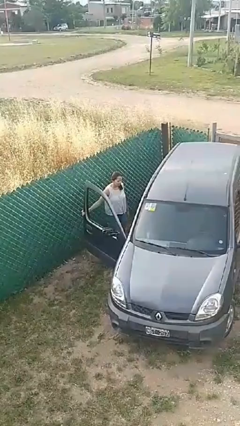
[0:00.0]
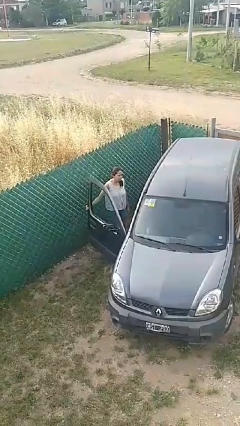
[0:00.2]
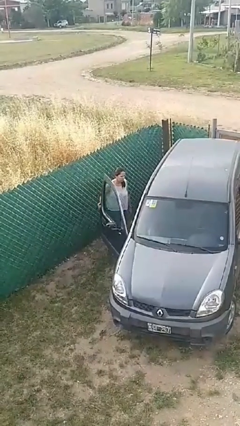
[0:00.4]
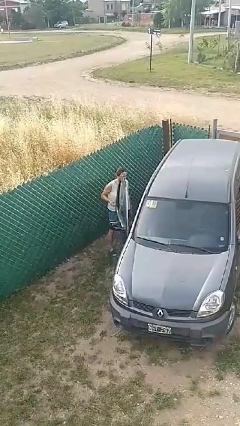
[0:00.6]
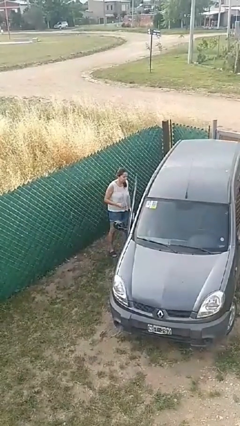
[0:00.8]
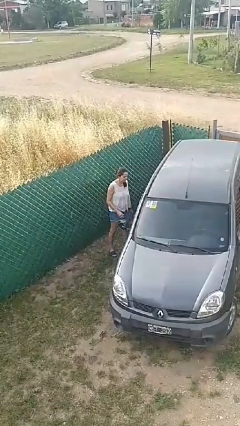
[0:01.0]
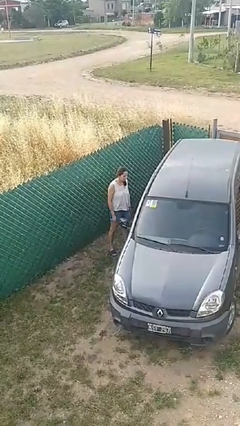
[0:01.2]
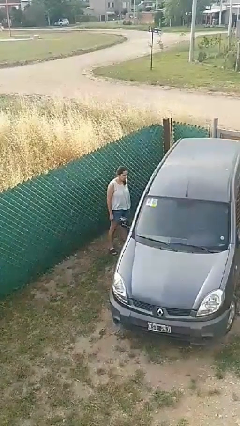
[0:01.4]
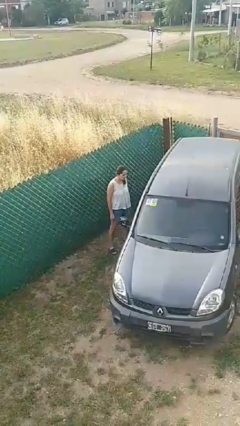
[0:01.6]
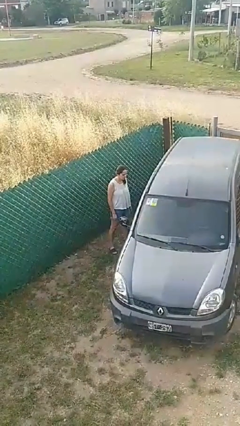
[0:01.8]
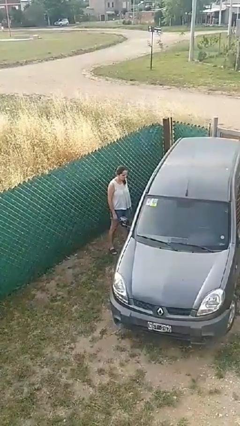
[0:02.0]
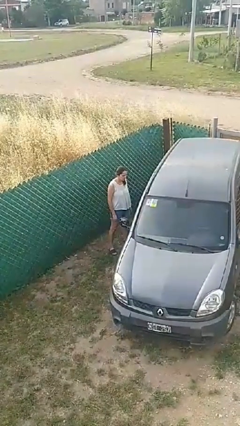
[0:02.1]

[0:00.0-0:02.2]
person closes car door

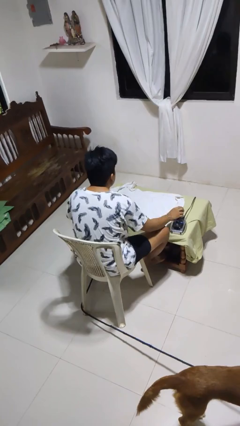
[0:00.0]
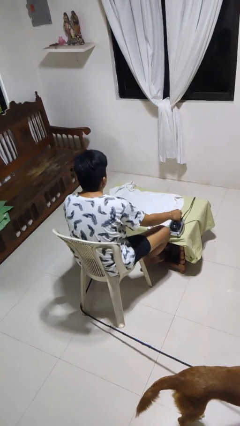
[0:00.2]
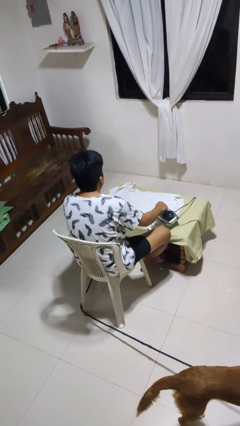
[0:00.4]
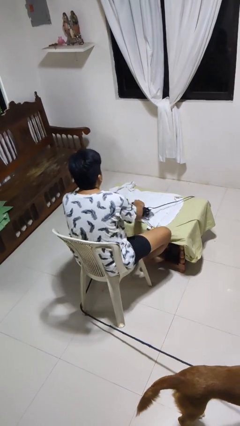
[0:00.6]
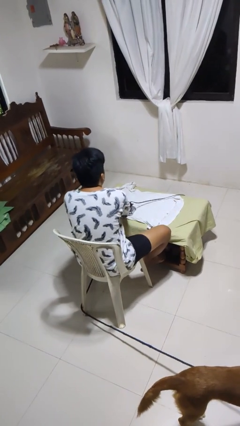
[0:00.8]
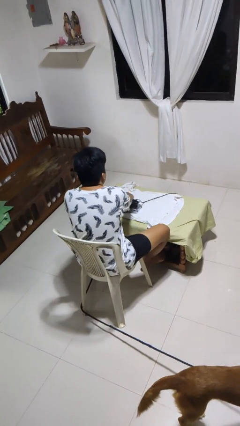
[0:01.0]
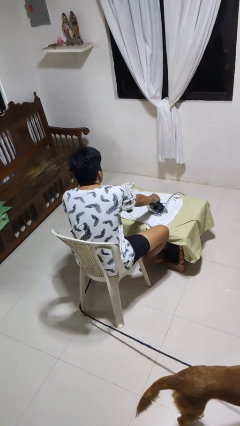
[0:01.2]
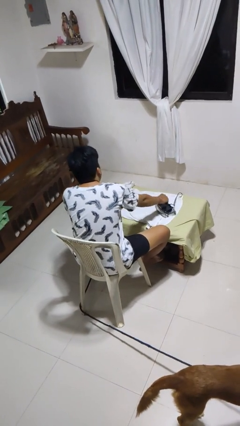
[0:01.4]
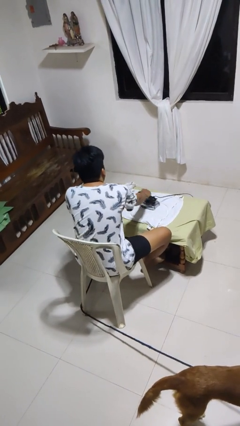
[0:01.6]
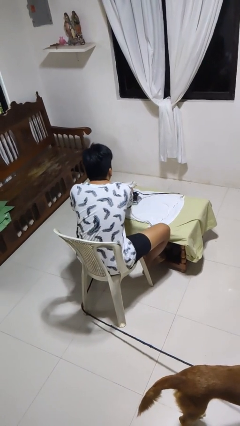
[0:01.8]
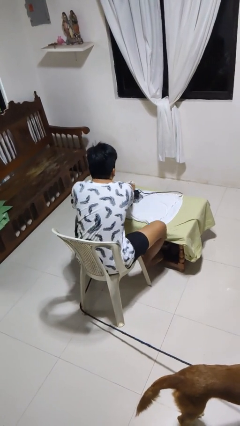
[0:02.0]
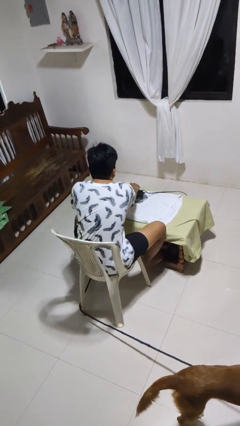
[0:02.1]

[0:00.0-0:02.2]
person irons clothes

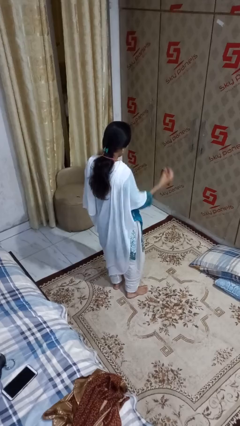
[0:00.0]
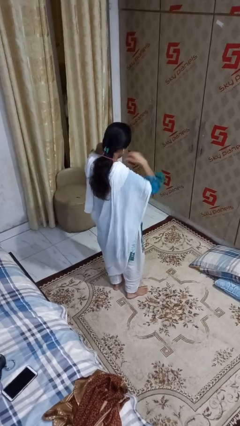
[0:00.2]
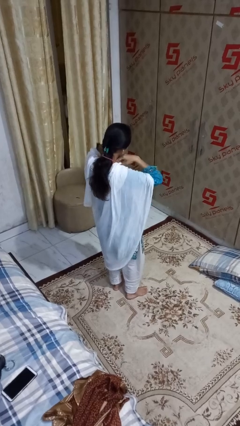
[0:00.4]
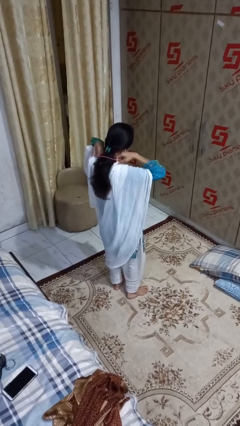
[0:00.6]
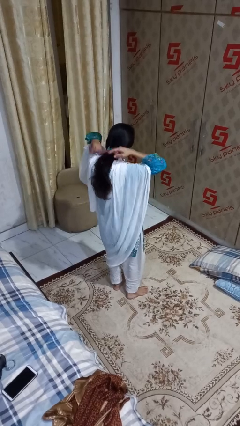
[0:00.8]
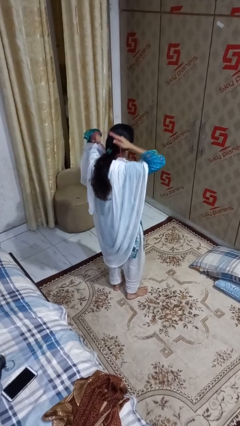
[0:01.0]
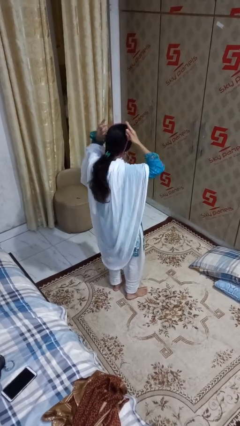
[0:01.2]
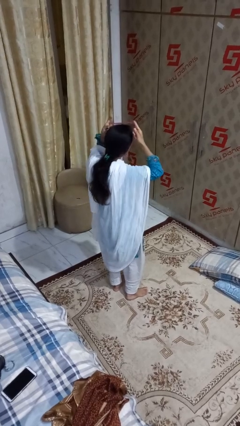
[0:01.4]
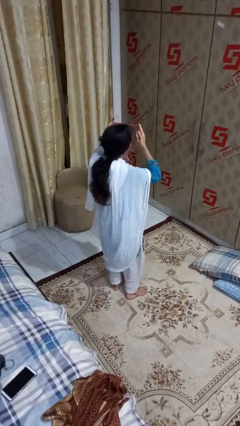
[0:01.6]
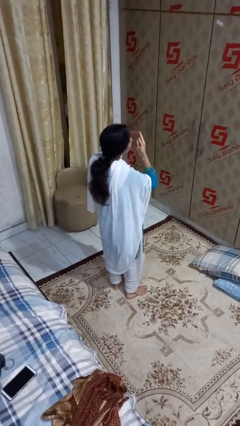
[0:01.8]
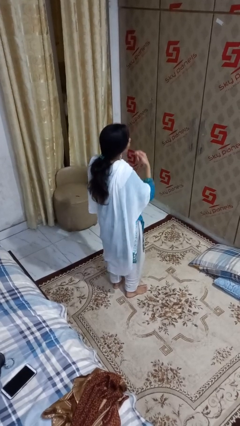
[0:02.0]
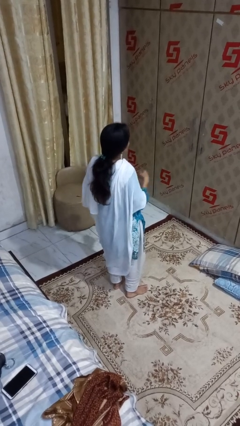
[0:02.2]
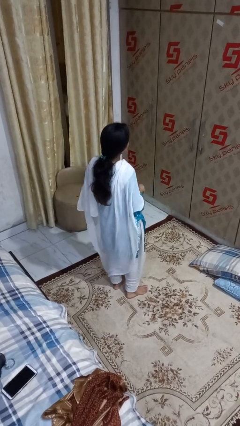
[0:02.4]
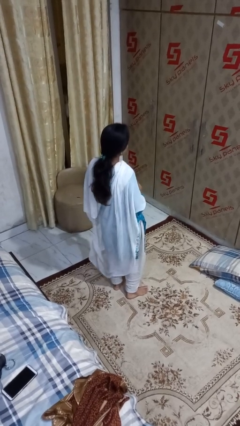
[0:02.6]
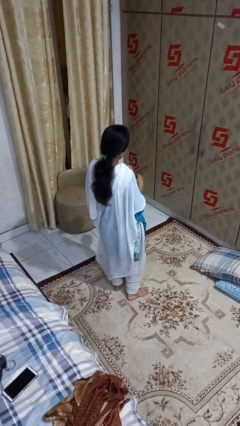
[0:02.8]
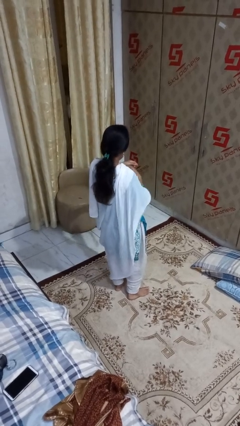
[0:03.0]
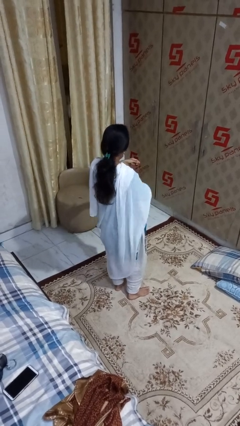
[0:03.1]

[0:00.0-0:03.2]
person takes off necklace

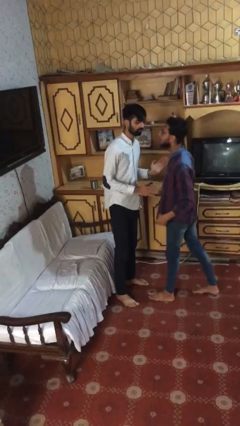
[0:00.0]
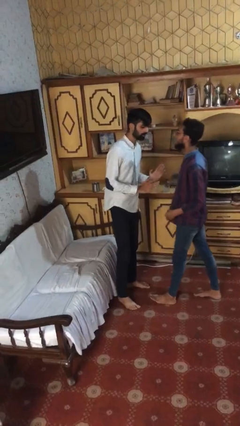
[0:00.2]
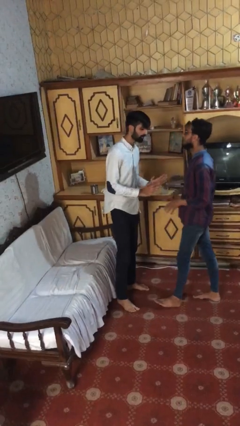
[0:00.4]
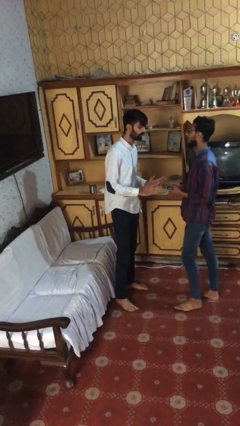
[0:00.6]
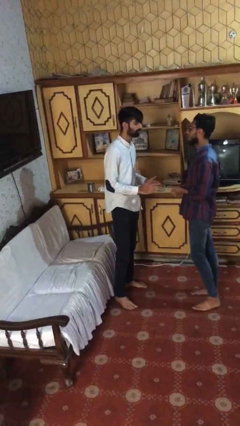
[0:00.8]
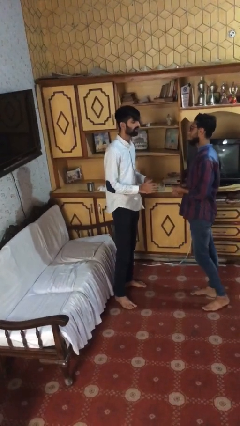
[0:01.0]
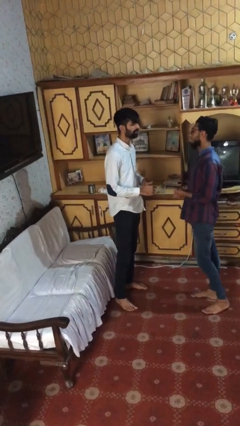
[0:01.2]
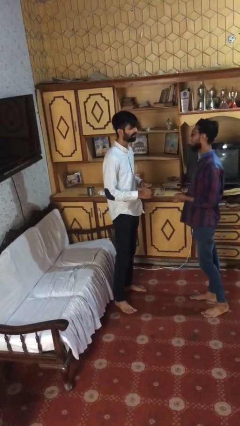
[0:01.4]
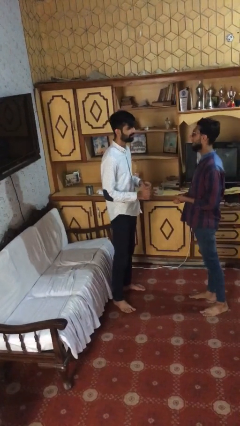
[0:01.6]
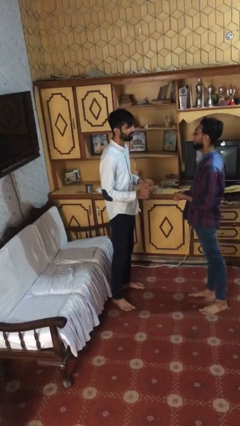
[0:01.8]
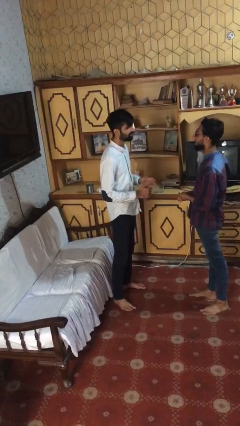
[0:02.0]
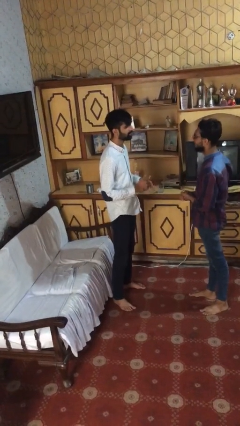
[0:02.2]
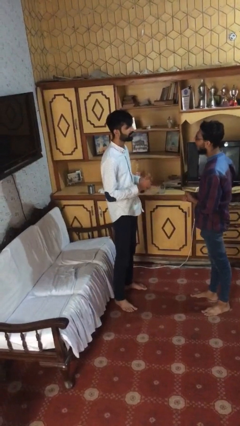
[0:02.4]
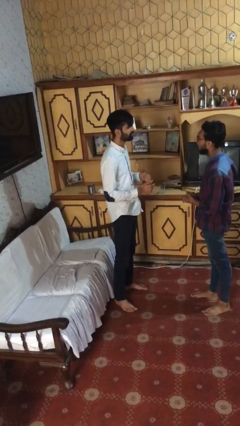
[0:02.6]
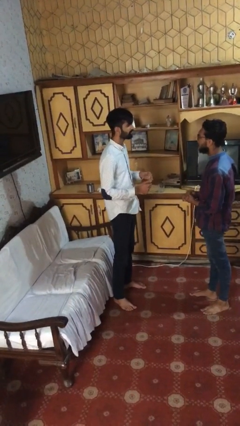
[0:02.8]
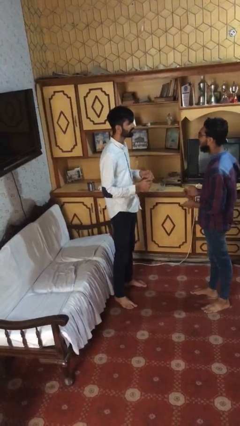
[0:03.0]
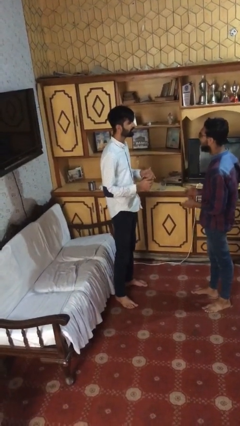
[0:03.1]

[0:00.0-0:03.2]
person talks to person

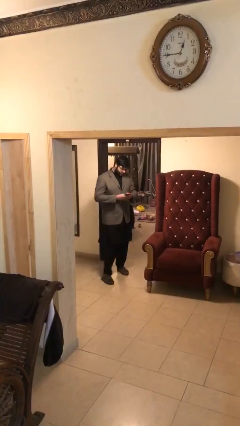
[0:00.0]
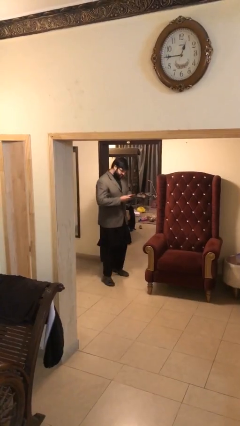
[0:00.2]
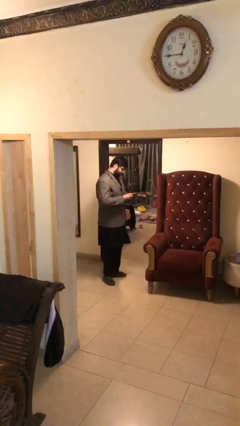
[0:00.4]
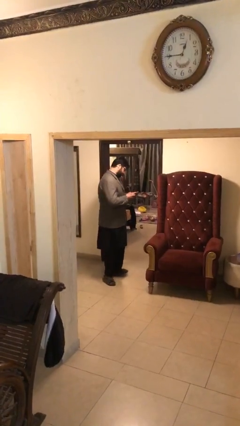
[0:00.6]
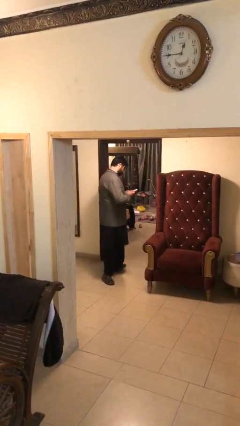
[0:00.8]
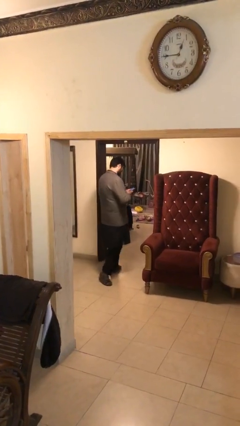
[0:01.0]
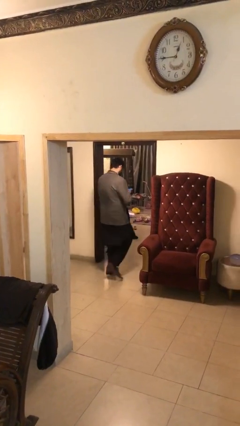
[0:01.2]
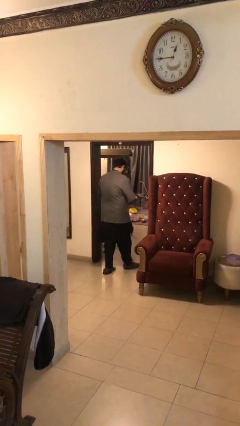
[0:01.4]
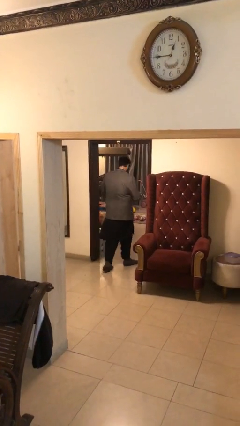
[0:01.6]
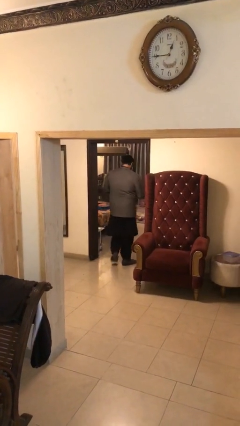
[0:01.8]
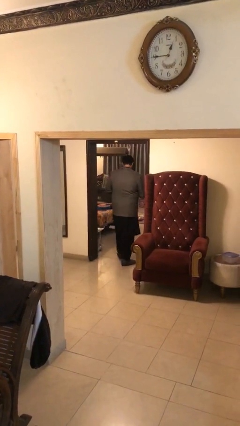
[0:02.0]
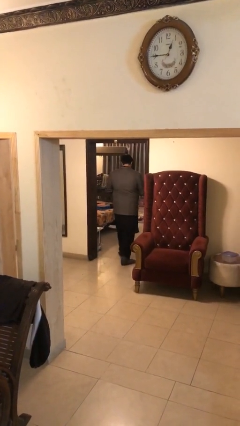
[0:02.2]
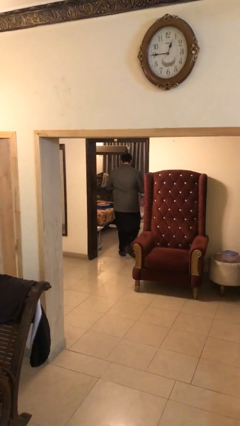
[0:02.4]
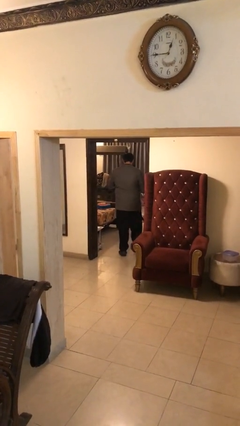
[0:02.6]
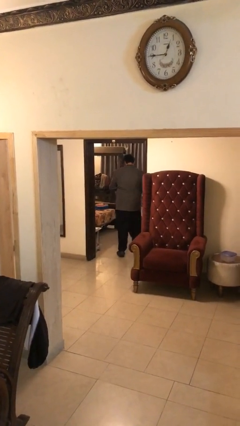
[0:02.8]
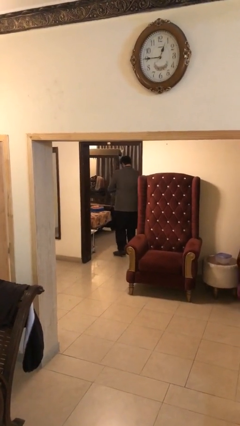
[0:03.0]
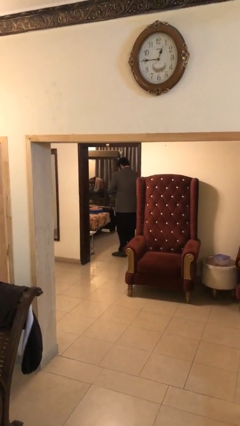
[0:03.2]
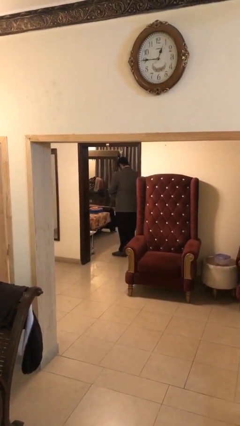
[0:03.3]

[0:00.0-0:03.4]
person exits scene through structure

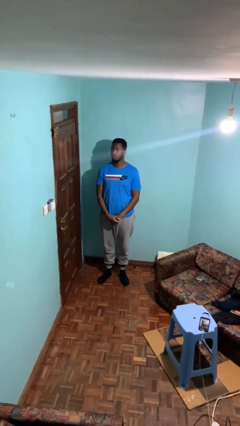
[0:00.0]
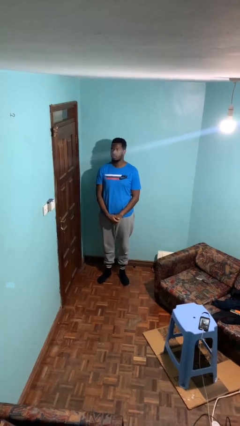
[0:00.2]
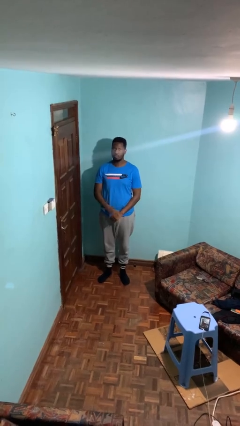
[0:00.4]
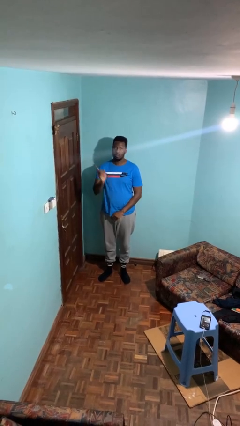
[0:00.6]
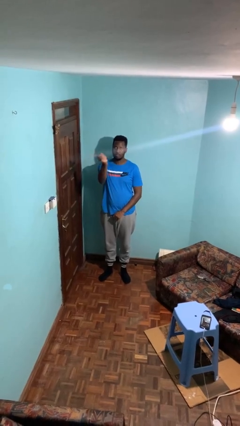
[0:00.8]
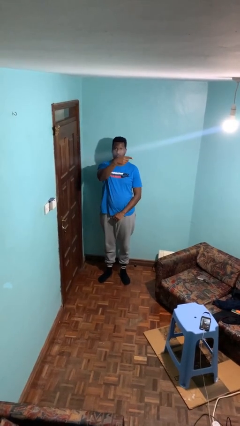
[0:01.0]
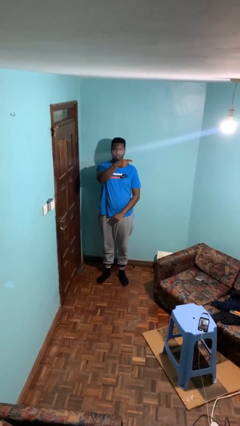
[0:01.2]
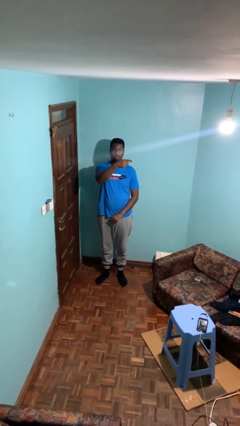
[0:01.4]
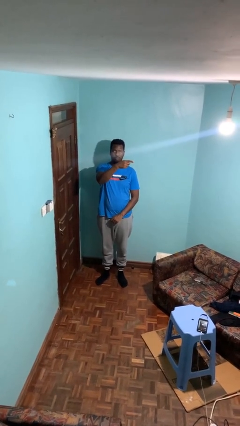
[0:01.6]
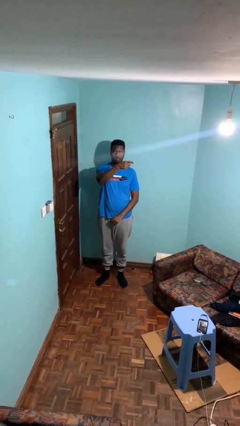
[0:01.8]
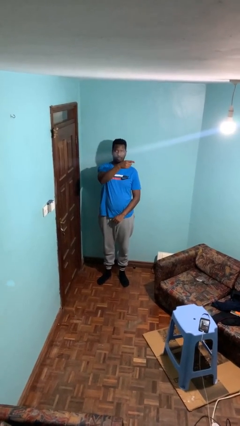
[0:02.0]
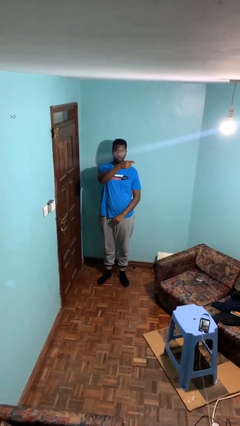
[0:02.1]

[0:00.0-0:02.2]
person gestures swipe left

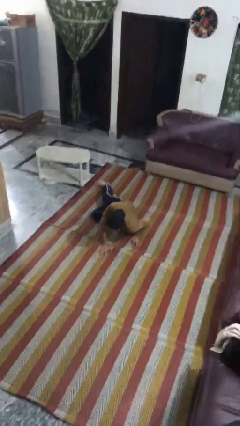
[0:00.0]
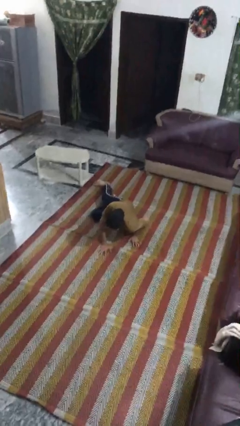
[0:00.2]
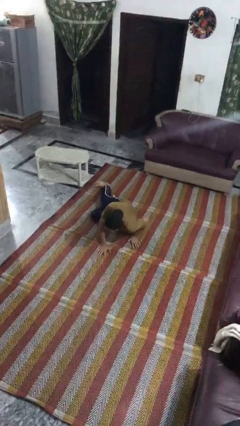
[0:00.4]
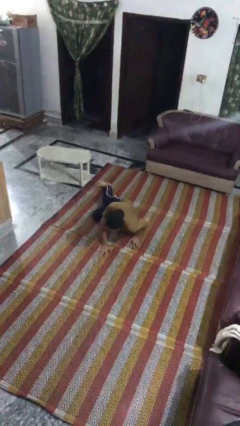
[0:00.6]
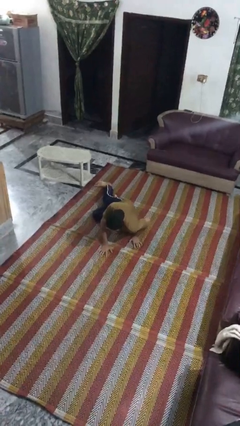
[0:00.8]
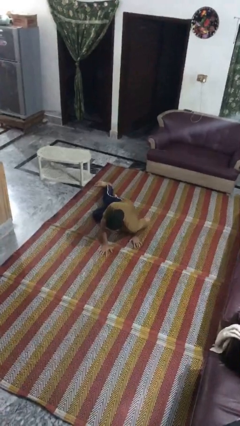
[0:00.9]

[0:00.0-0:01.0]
person lies down on floor
